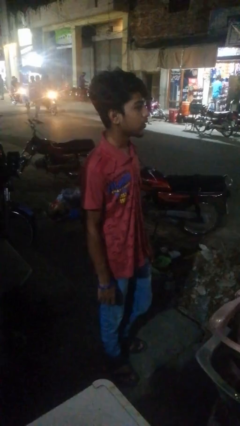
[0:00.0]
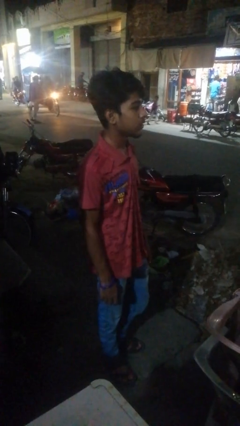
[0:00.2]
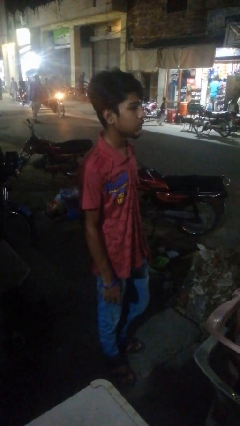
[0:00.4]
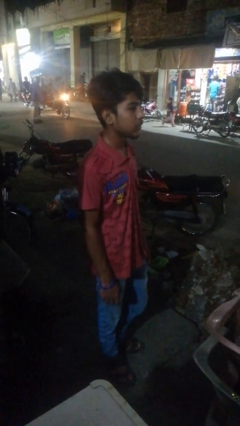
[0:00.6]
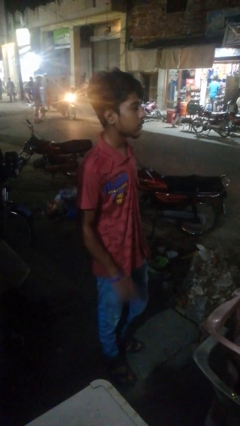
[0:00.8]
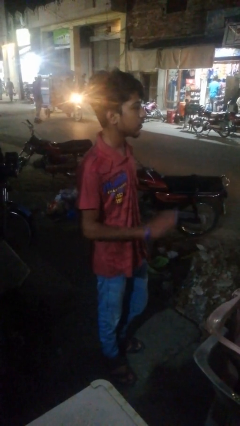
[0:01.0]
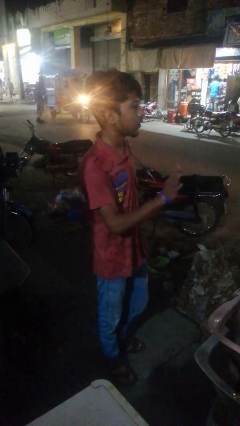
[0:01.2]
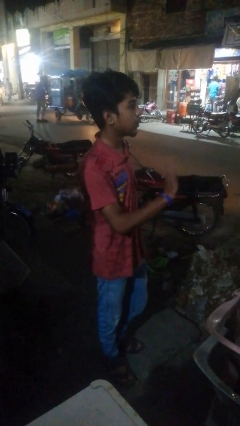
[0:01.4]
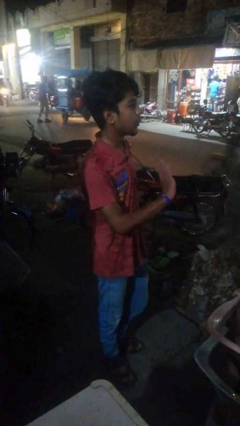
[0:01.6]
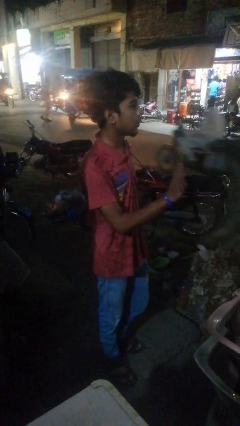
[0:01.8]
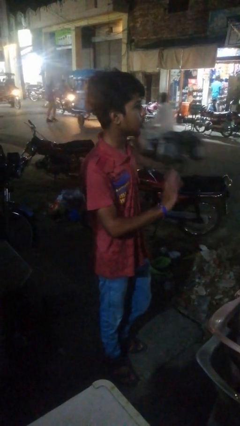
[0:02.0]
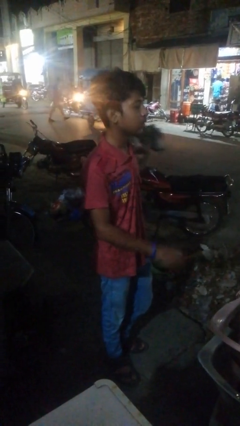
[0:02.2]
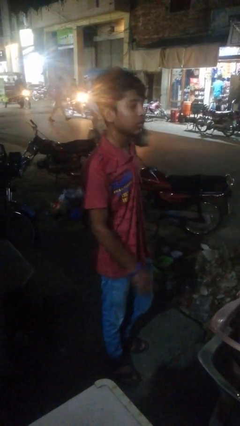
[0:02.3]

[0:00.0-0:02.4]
person waves at person

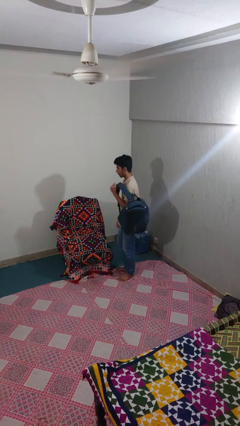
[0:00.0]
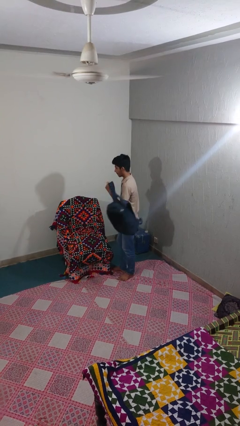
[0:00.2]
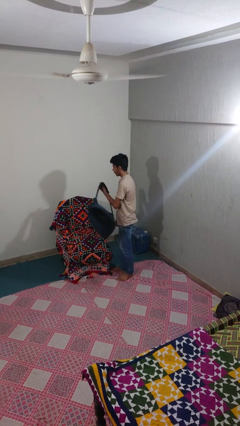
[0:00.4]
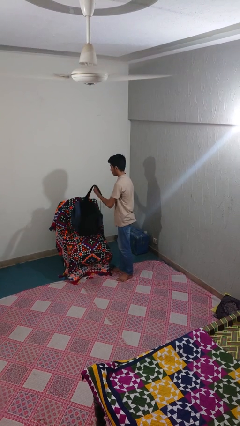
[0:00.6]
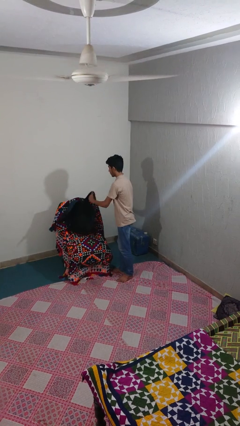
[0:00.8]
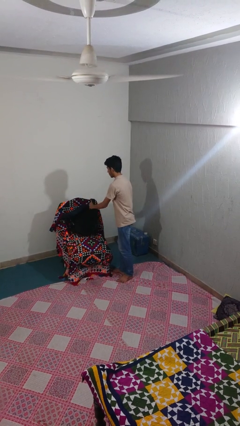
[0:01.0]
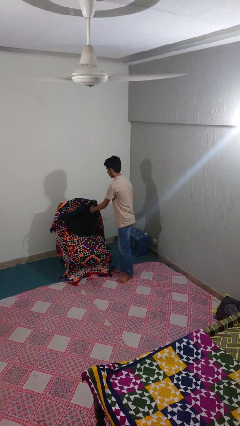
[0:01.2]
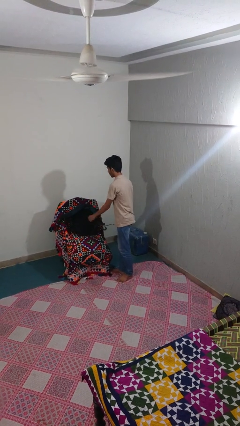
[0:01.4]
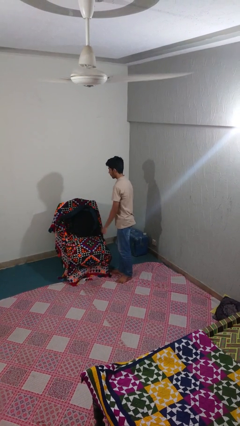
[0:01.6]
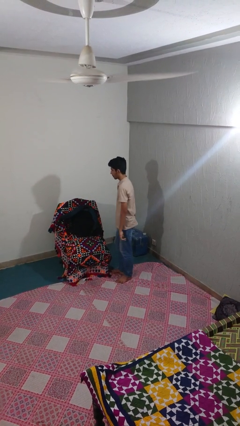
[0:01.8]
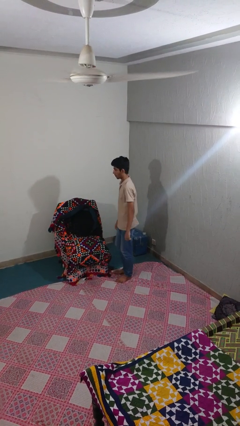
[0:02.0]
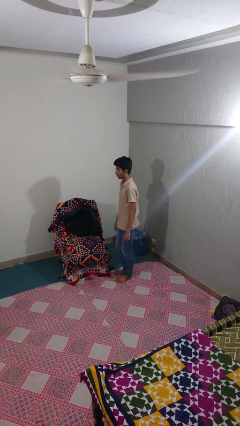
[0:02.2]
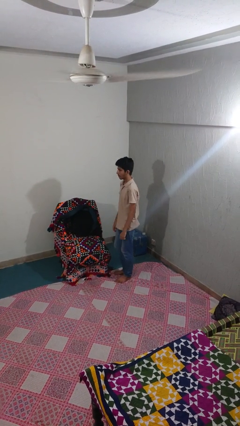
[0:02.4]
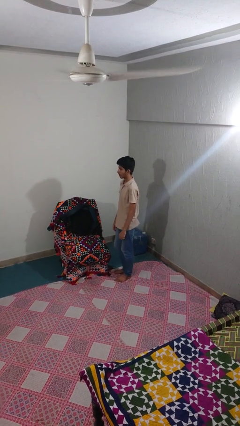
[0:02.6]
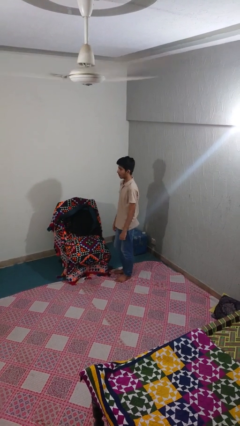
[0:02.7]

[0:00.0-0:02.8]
person puts down object on couch

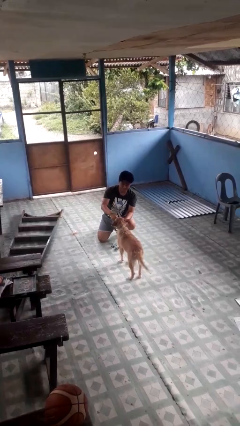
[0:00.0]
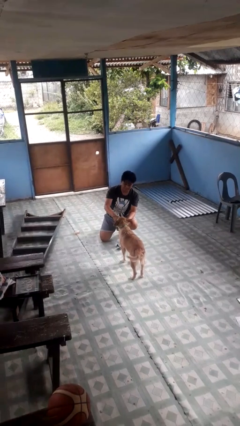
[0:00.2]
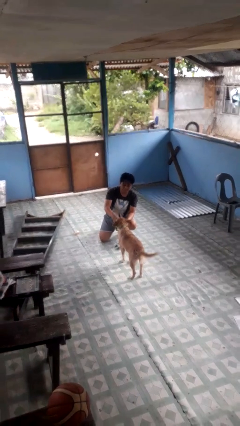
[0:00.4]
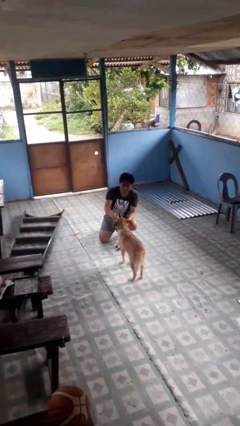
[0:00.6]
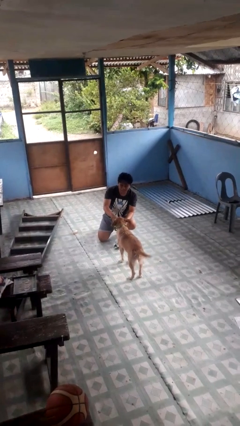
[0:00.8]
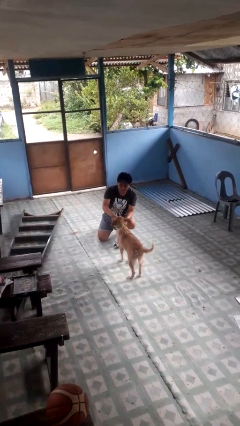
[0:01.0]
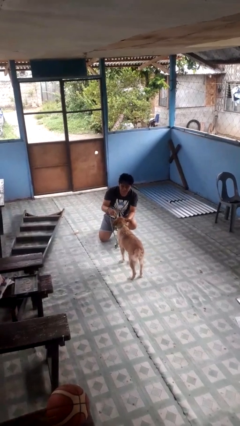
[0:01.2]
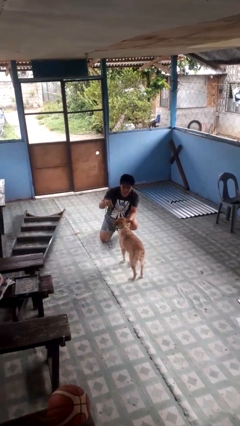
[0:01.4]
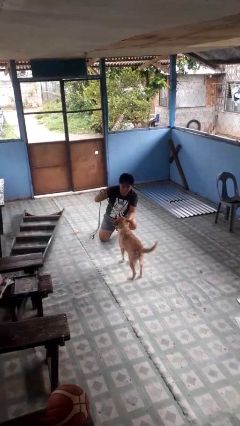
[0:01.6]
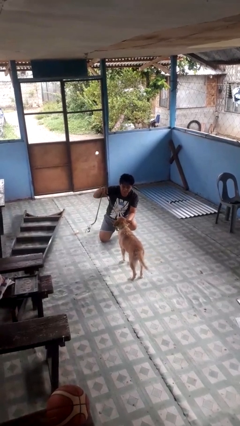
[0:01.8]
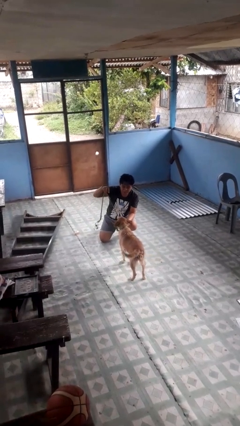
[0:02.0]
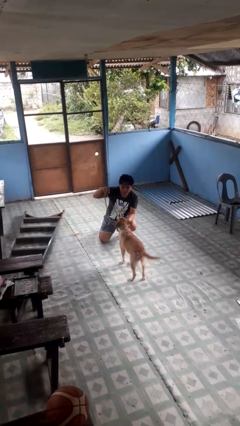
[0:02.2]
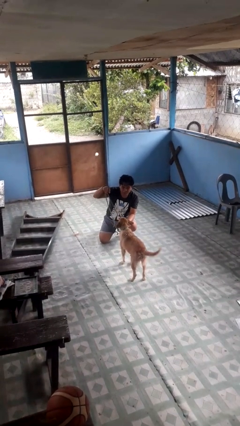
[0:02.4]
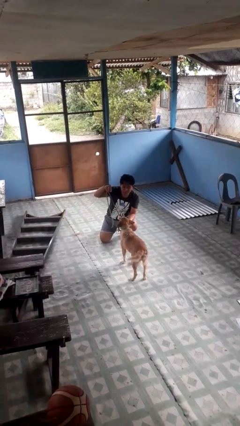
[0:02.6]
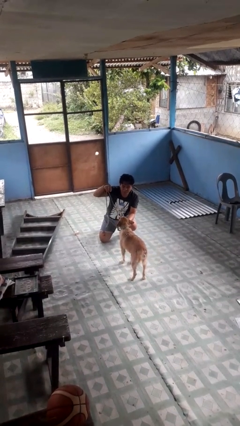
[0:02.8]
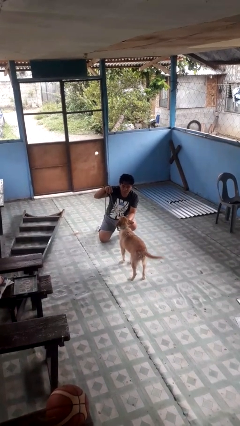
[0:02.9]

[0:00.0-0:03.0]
person attaches leash to dog

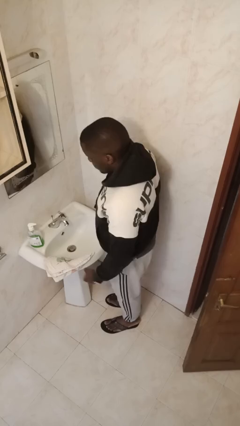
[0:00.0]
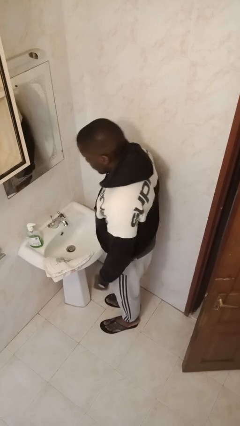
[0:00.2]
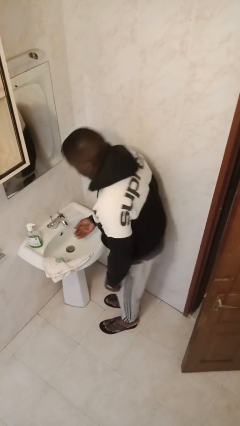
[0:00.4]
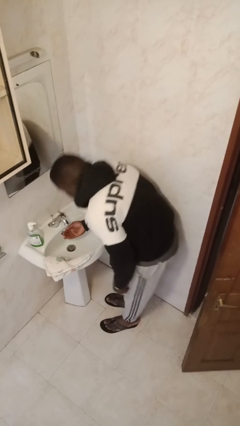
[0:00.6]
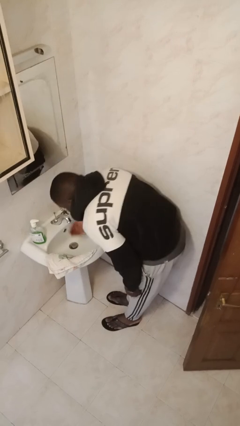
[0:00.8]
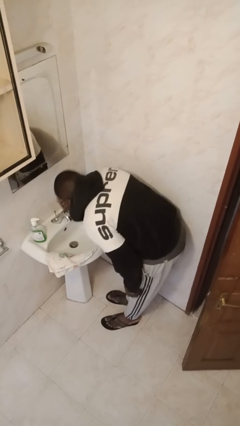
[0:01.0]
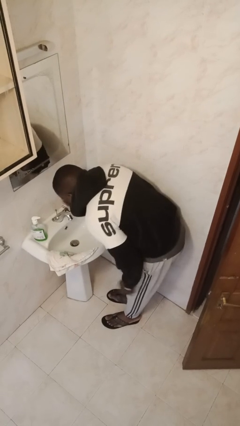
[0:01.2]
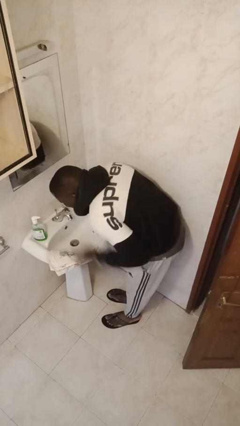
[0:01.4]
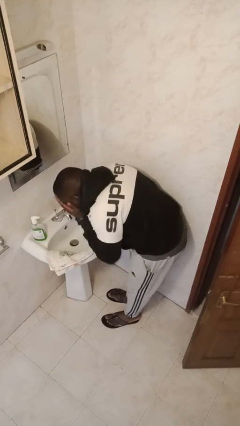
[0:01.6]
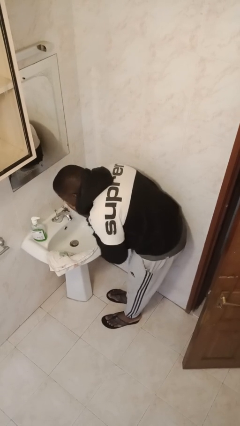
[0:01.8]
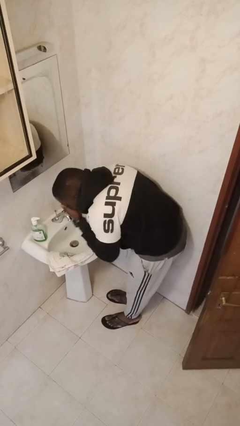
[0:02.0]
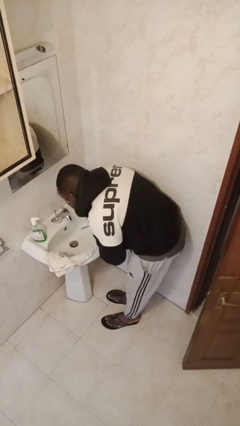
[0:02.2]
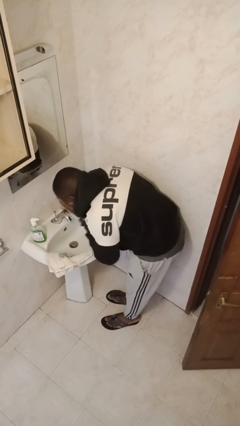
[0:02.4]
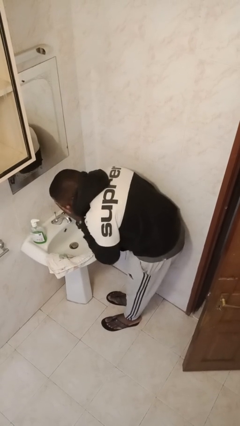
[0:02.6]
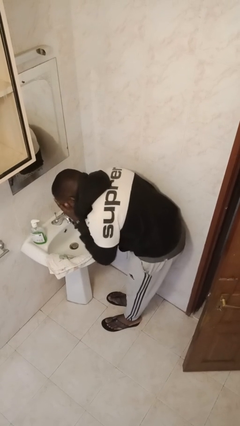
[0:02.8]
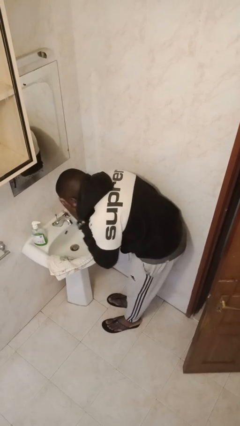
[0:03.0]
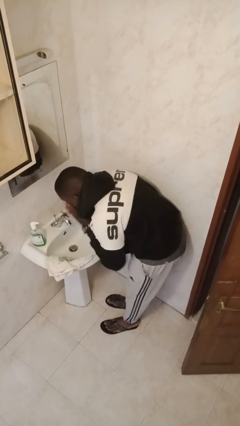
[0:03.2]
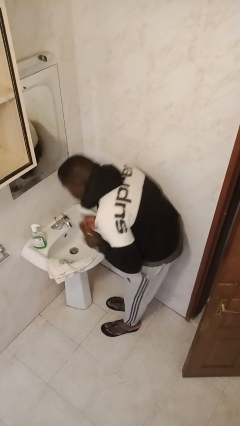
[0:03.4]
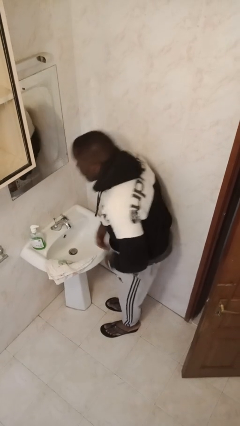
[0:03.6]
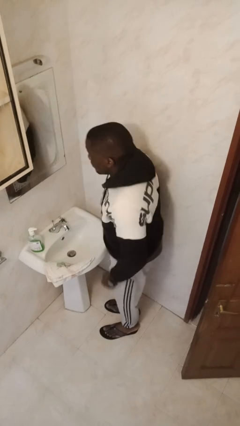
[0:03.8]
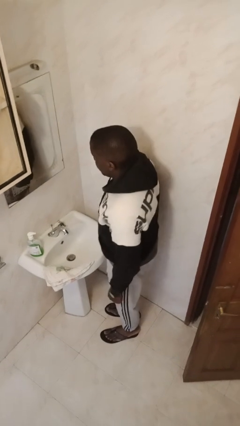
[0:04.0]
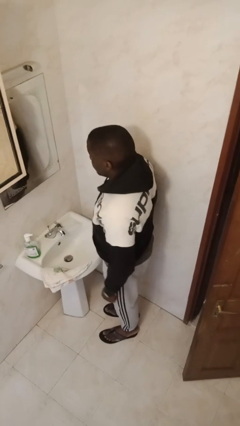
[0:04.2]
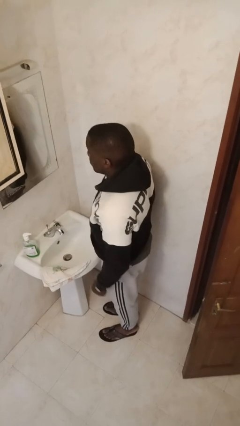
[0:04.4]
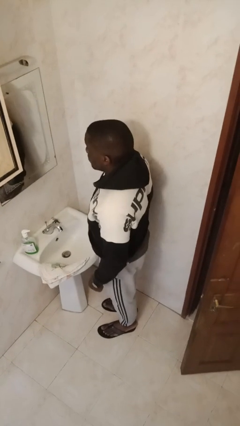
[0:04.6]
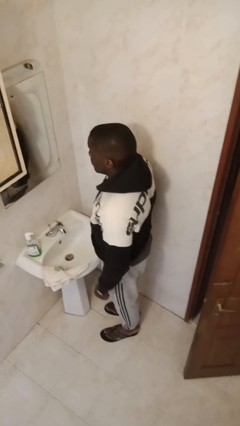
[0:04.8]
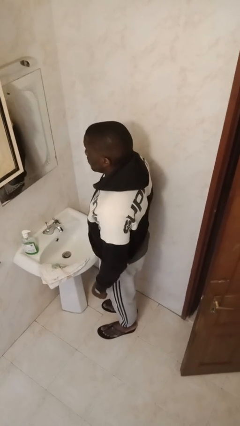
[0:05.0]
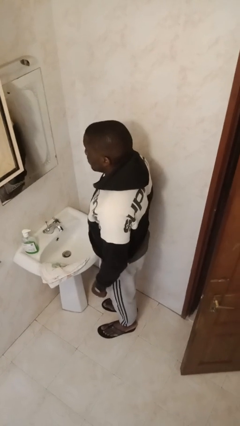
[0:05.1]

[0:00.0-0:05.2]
person washes face

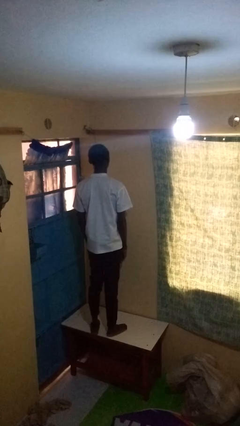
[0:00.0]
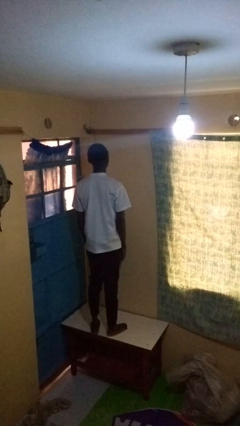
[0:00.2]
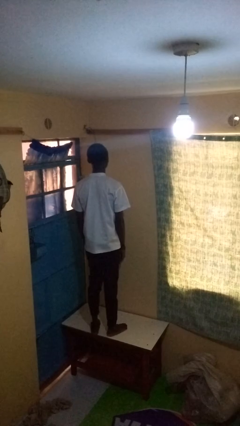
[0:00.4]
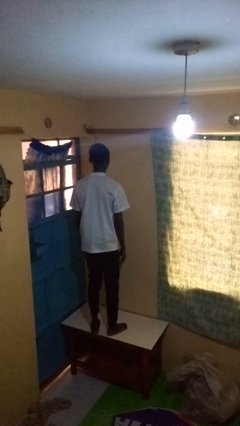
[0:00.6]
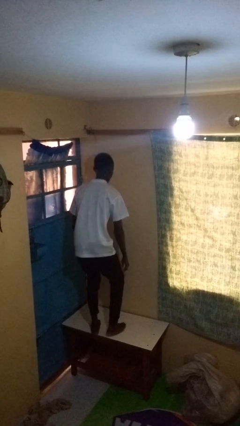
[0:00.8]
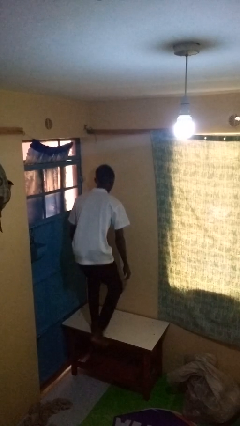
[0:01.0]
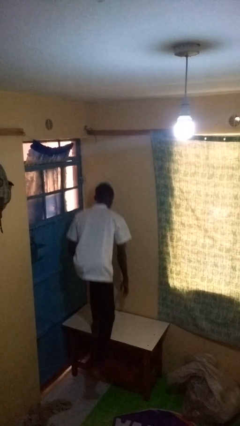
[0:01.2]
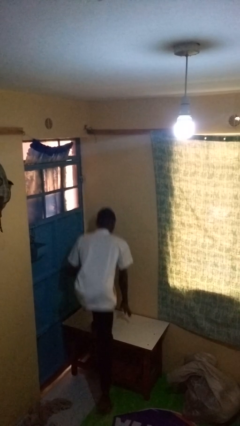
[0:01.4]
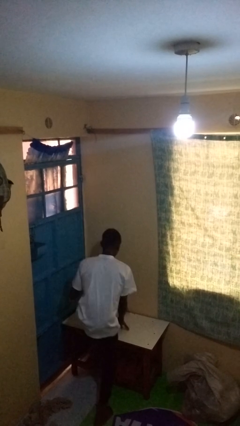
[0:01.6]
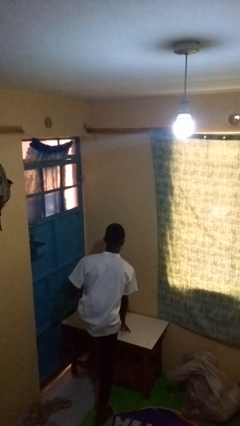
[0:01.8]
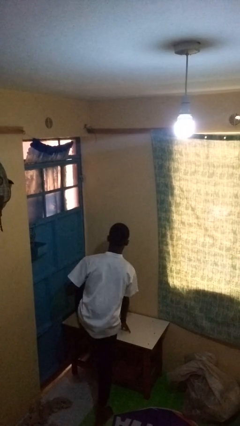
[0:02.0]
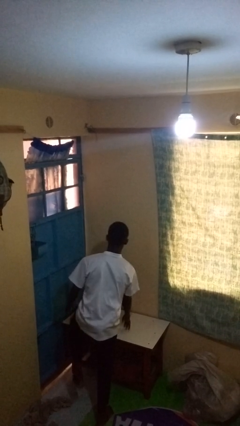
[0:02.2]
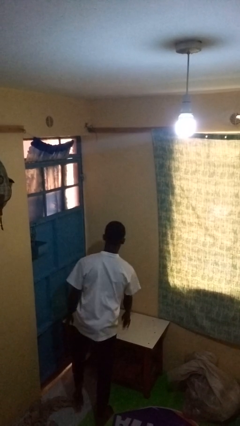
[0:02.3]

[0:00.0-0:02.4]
person climbs off table

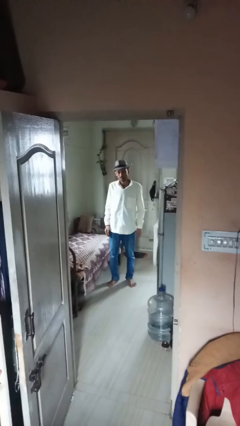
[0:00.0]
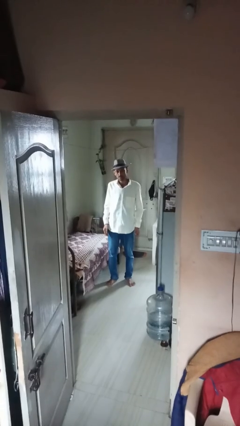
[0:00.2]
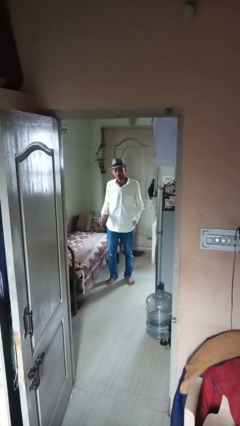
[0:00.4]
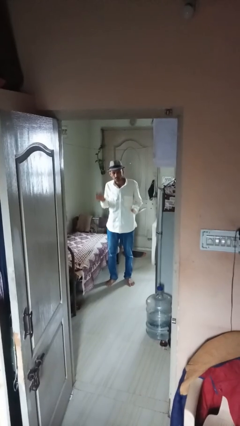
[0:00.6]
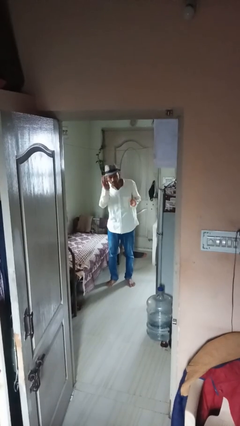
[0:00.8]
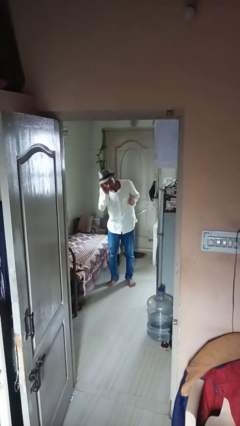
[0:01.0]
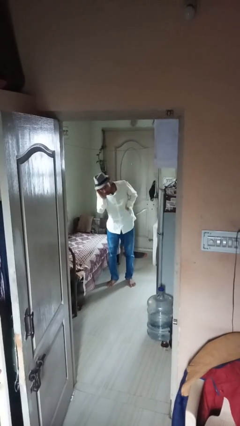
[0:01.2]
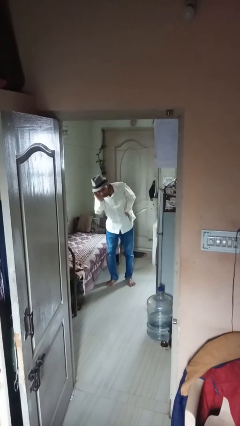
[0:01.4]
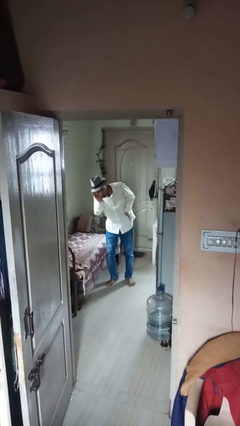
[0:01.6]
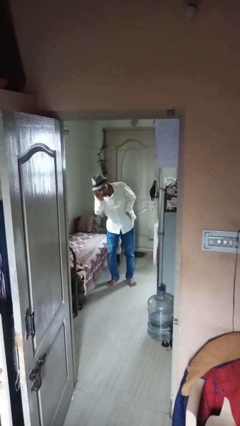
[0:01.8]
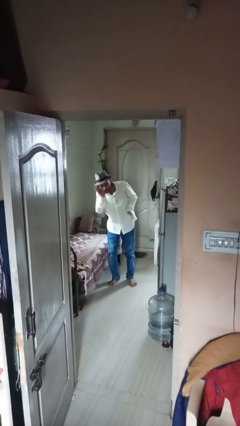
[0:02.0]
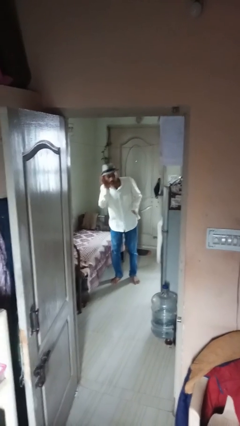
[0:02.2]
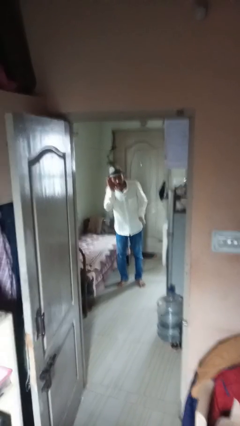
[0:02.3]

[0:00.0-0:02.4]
person gestures listen closely
